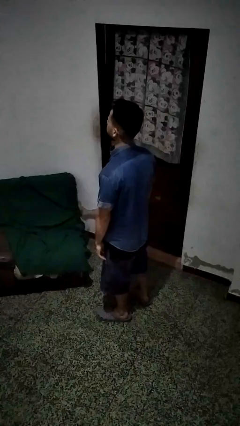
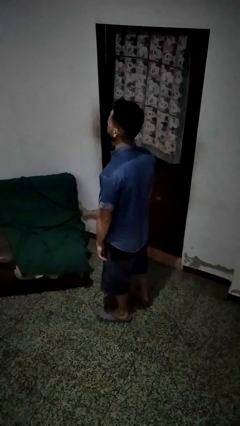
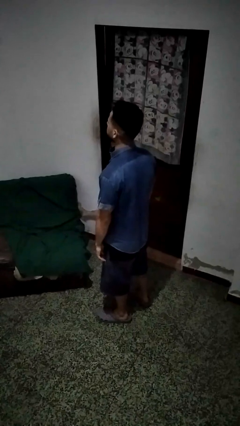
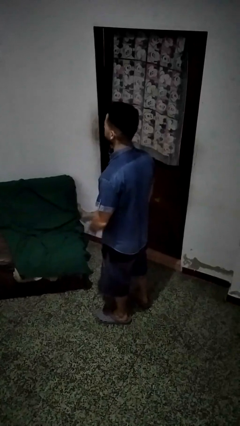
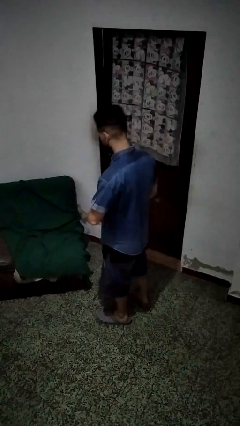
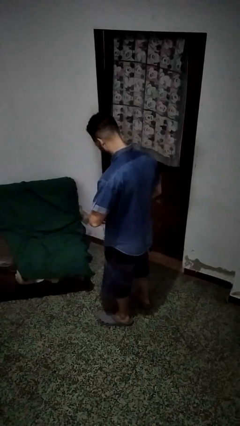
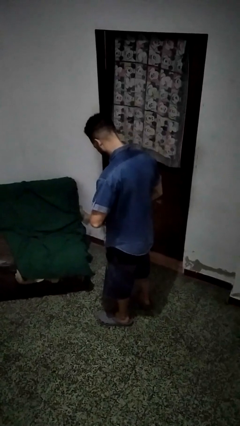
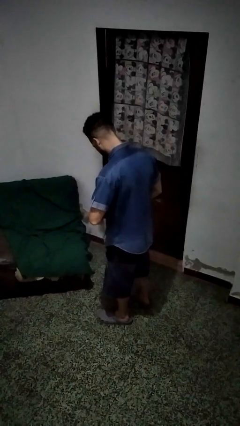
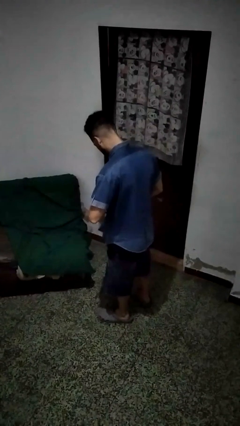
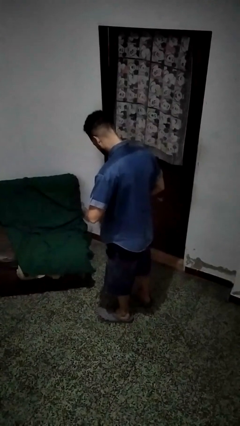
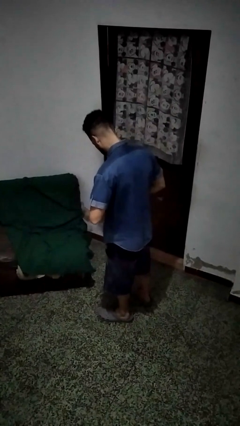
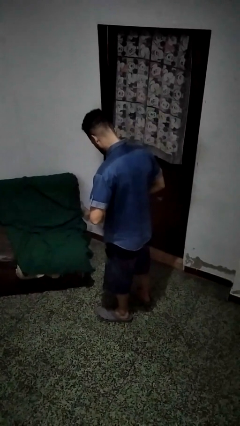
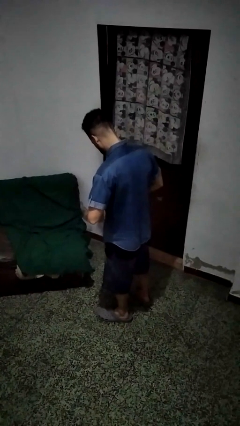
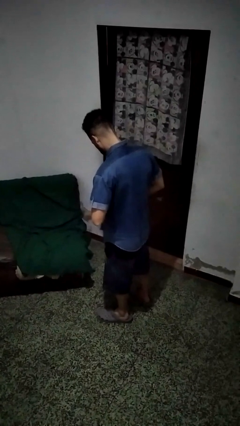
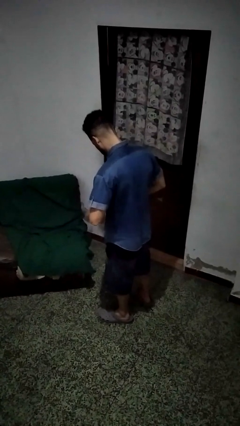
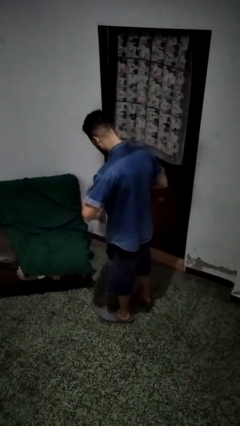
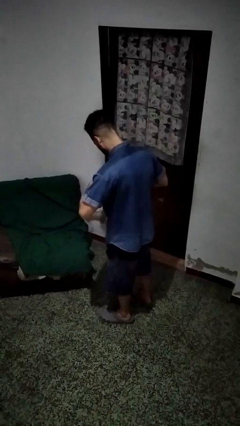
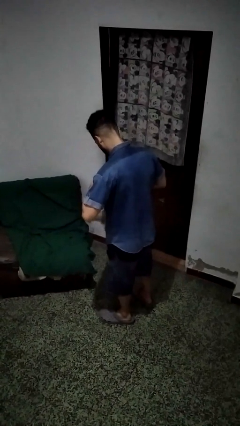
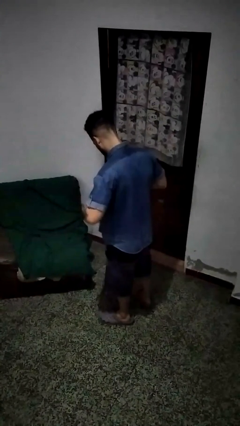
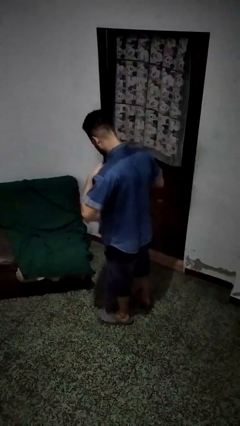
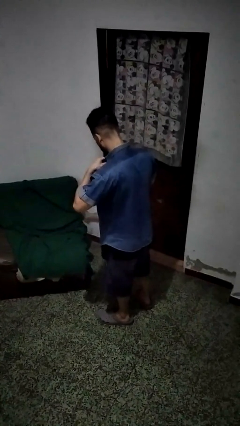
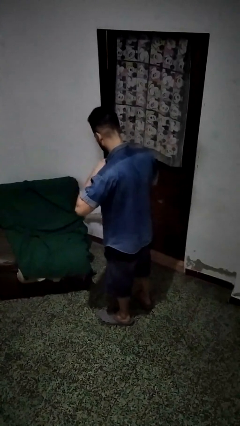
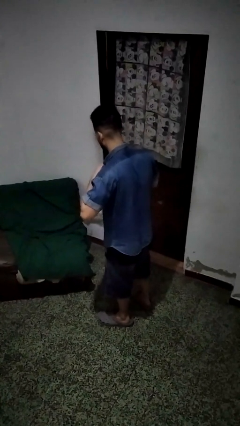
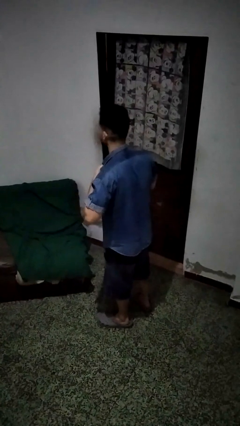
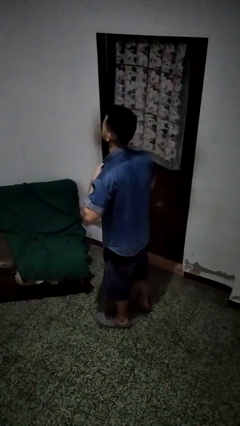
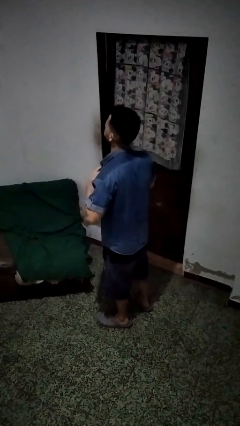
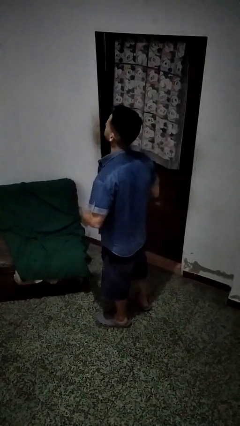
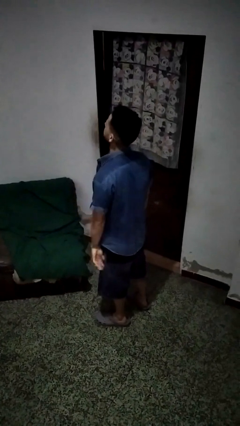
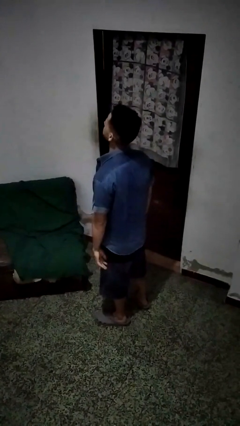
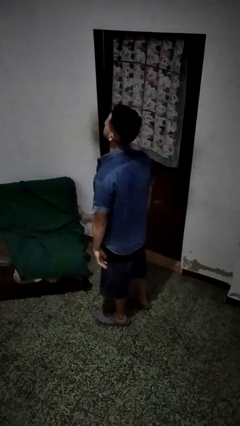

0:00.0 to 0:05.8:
person unbuttons shirt

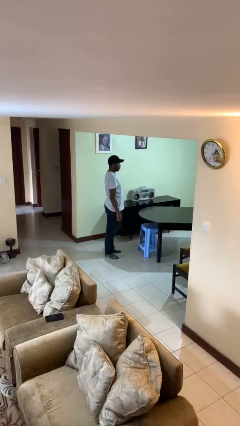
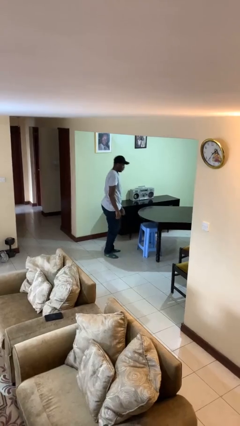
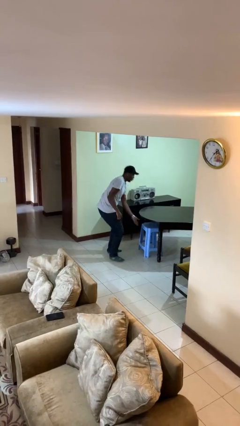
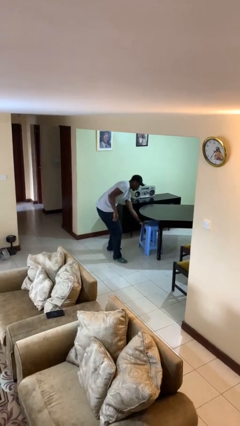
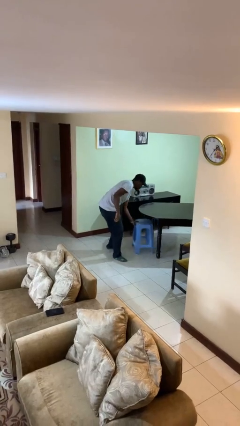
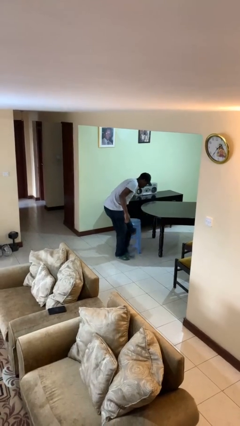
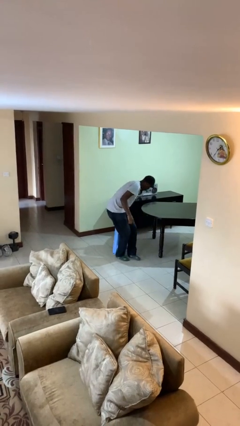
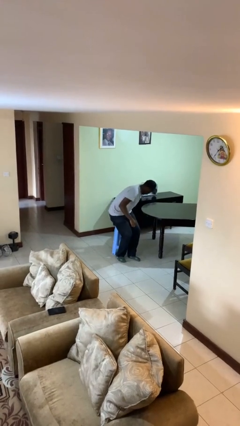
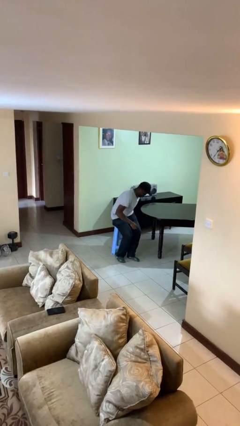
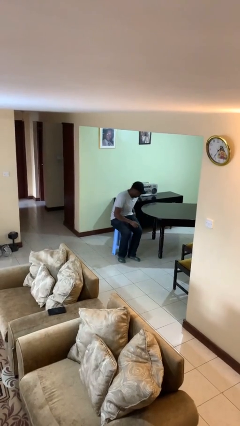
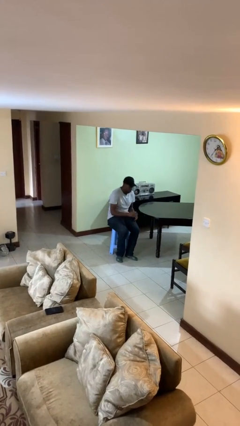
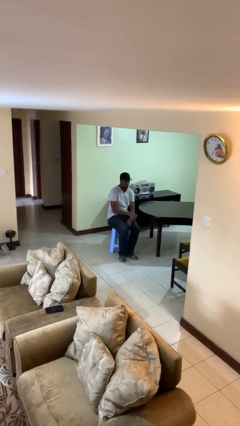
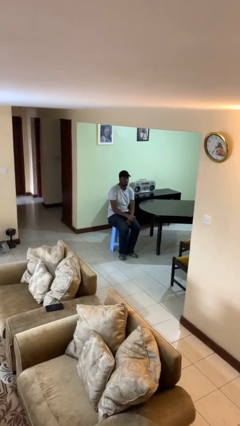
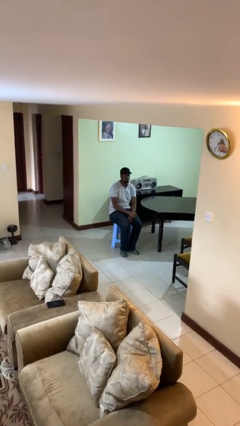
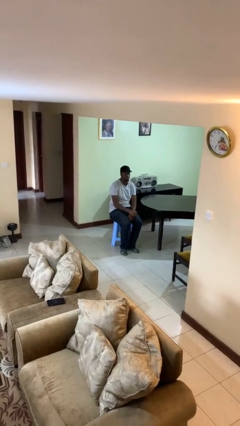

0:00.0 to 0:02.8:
person sits down

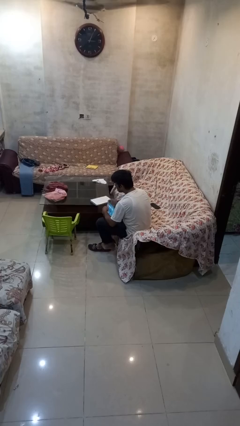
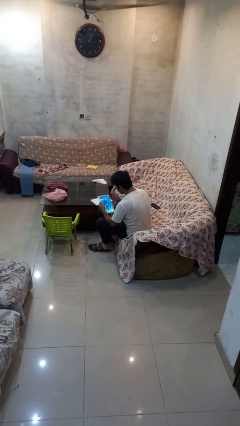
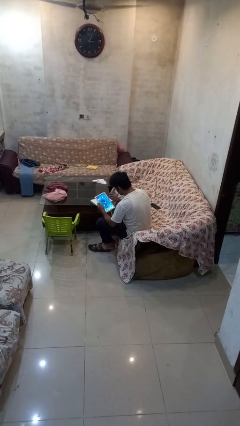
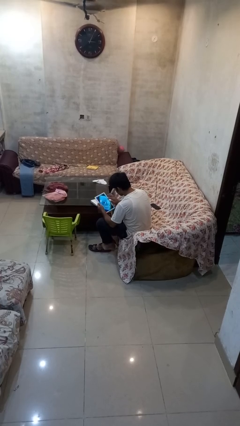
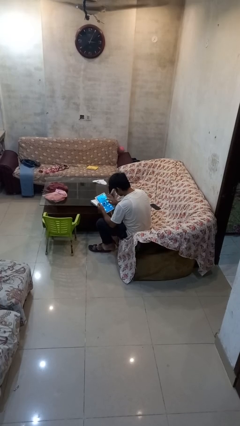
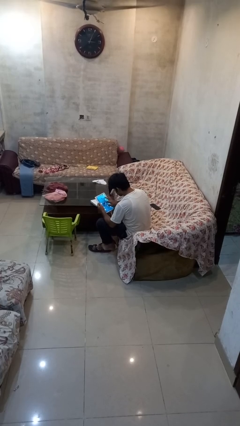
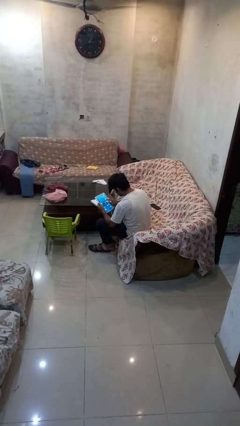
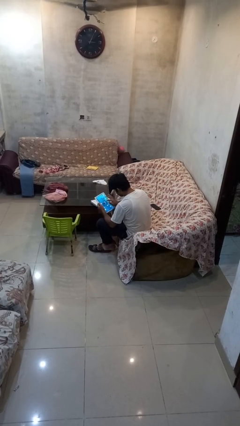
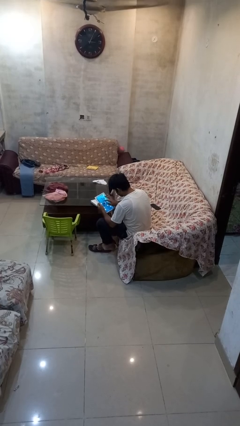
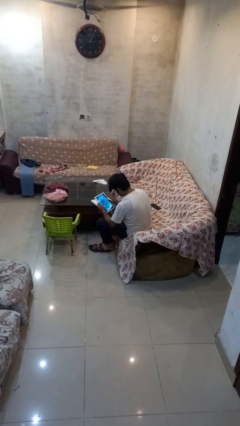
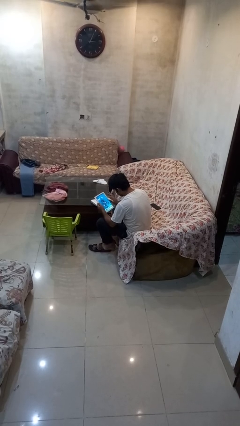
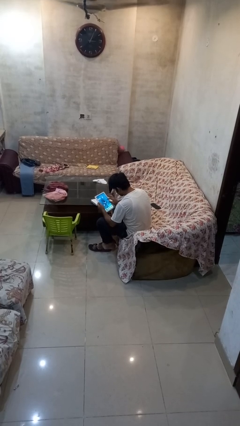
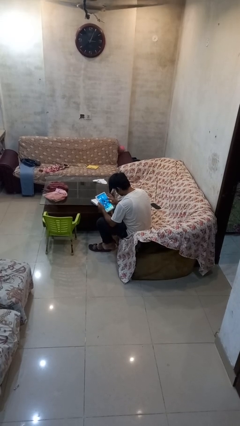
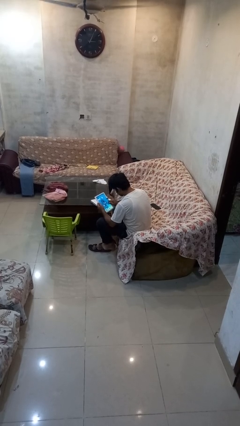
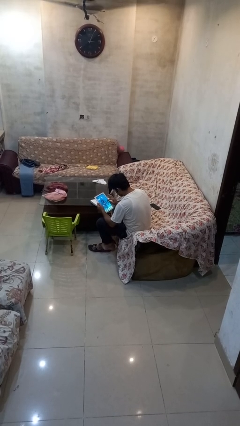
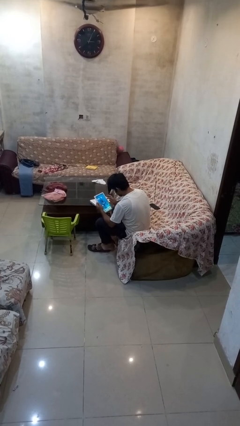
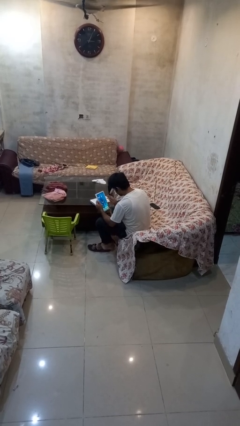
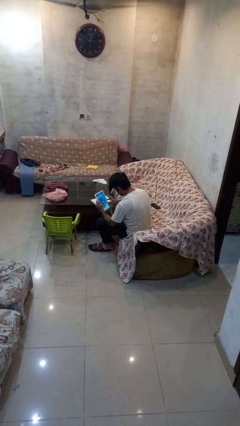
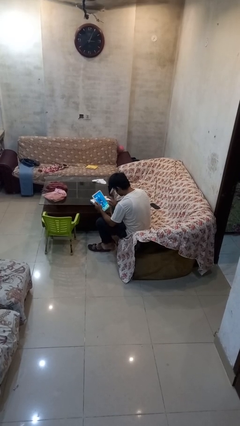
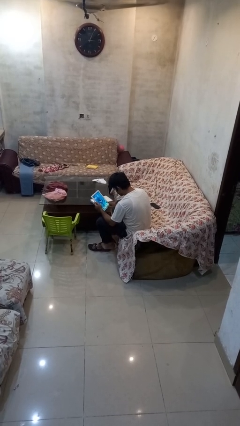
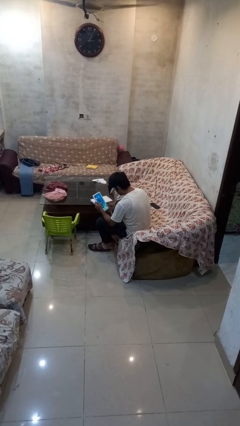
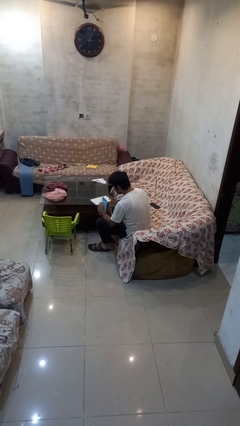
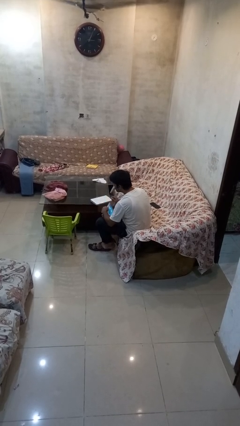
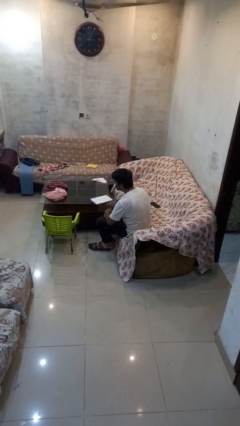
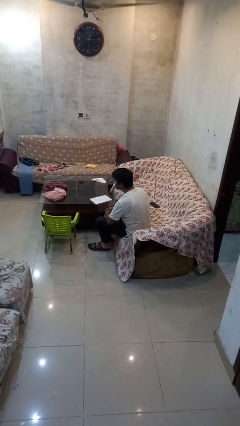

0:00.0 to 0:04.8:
person interacts with tablet

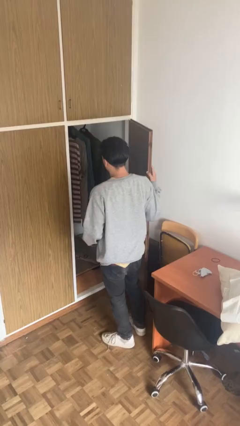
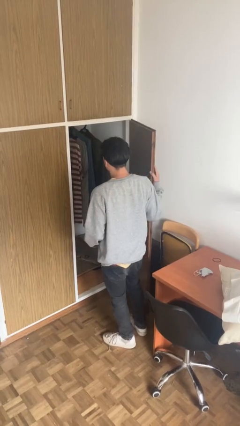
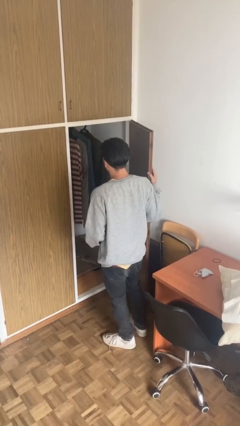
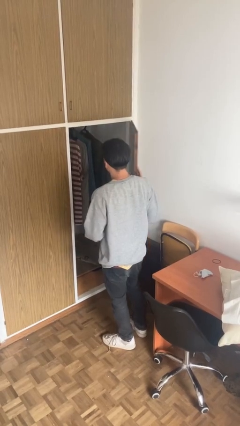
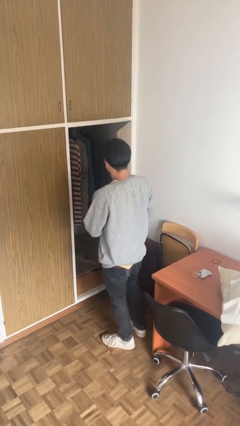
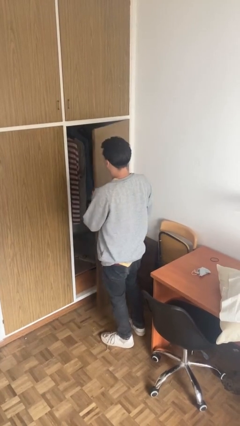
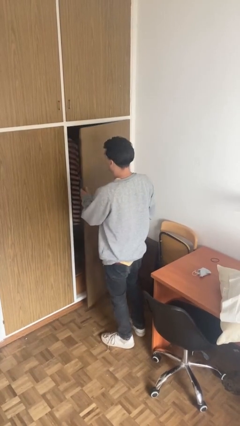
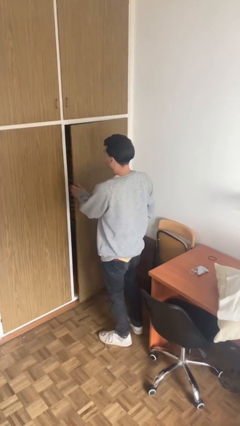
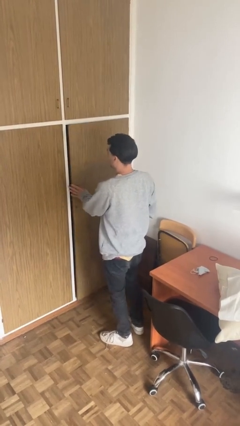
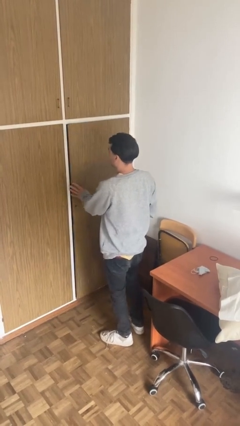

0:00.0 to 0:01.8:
person closes closet door

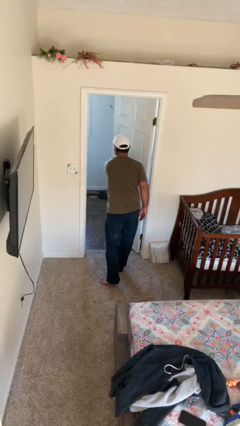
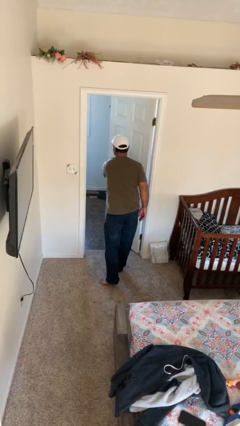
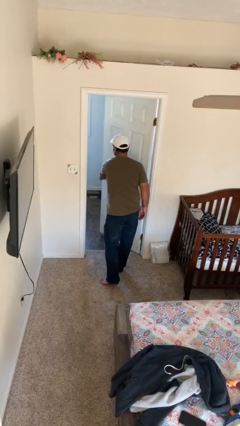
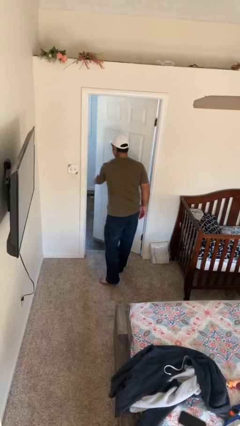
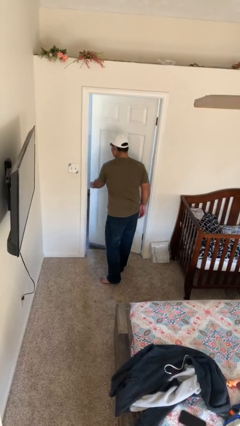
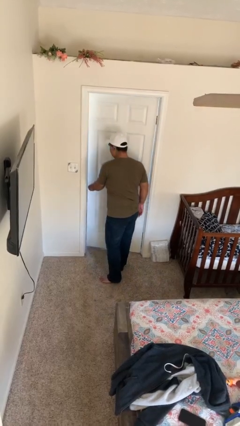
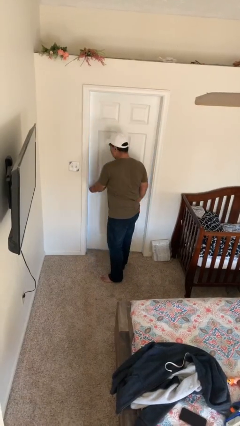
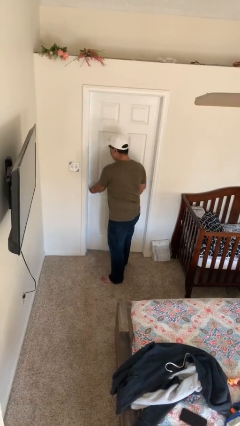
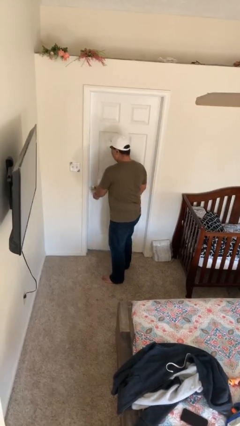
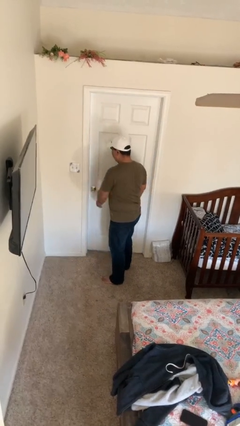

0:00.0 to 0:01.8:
person closes facility door

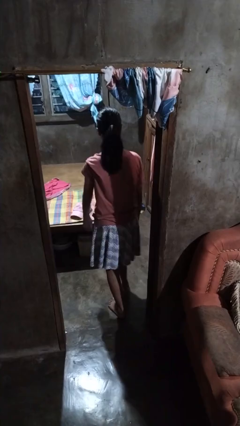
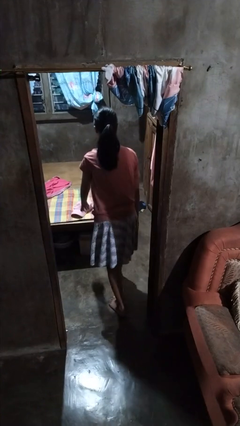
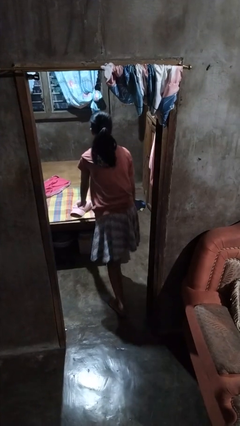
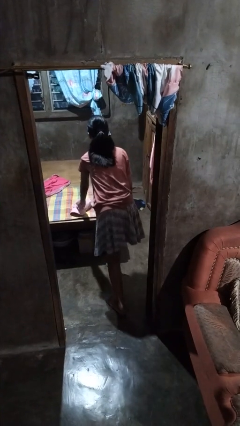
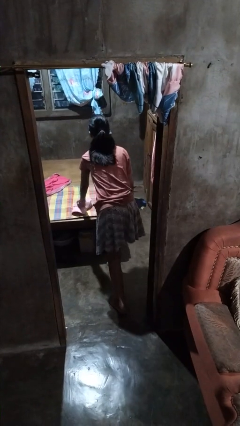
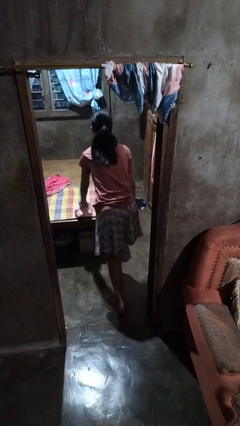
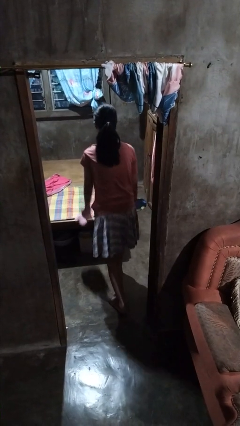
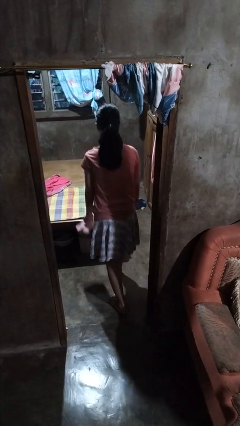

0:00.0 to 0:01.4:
person picks up object from bed
